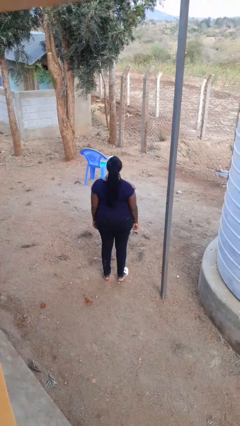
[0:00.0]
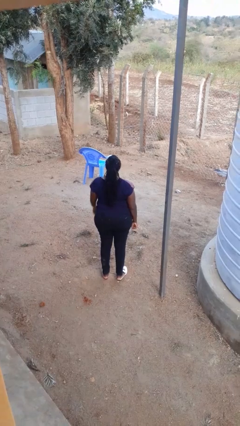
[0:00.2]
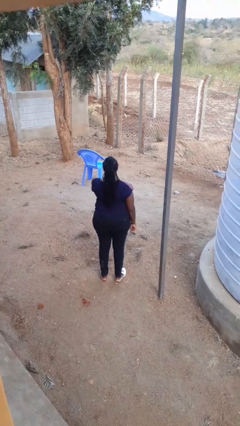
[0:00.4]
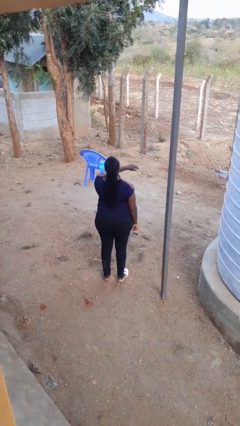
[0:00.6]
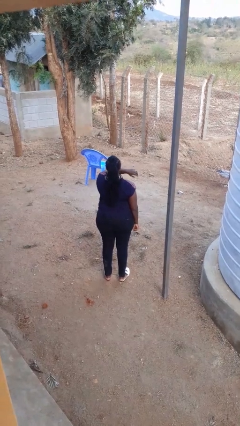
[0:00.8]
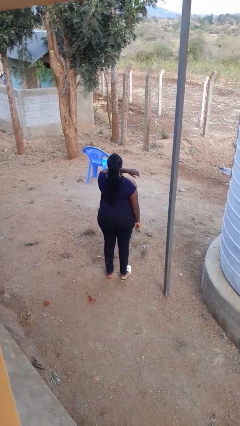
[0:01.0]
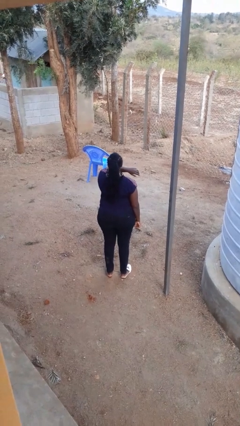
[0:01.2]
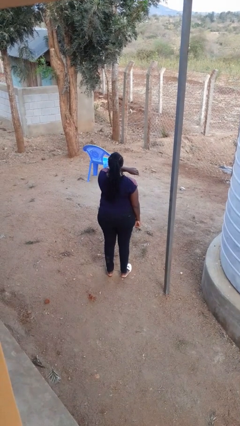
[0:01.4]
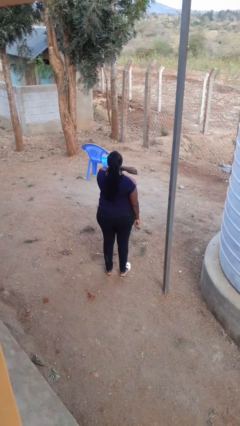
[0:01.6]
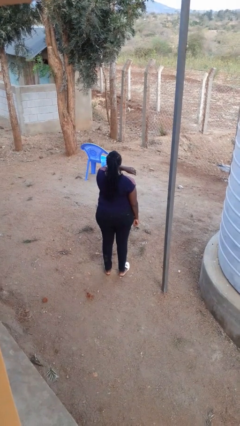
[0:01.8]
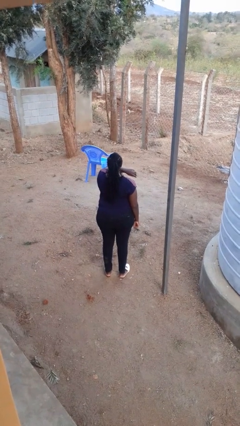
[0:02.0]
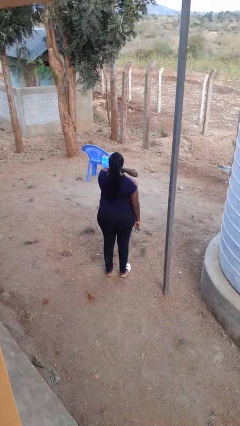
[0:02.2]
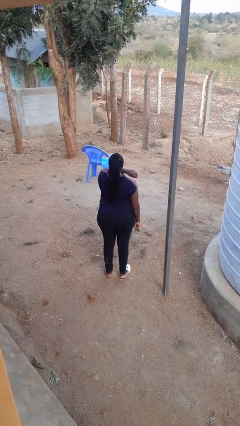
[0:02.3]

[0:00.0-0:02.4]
person sneezes into arm

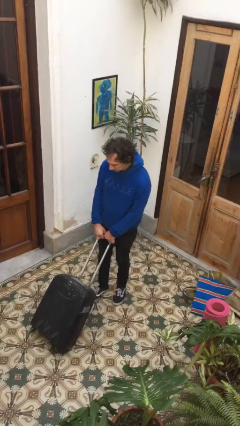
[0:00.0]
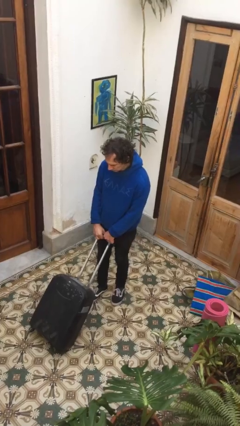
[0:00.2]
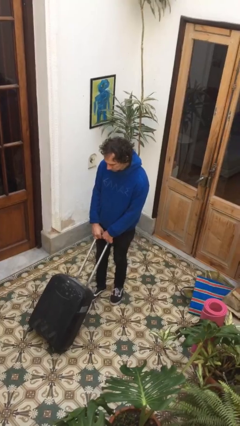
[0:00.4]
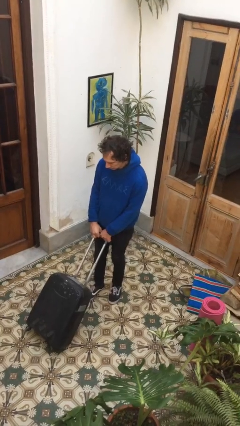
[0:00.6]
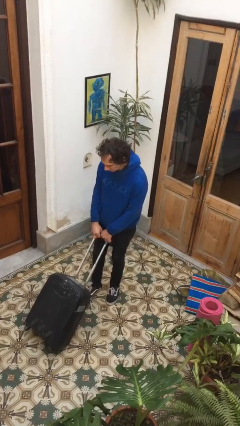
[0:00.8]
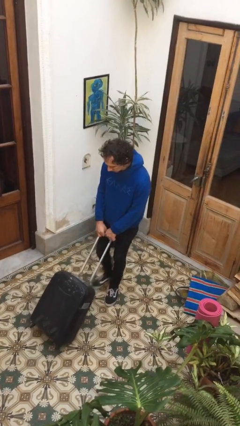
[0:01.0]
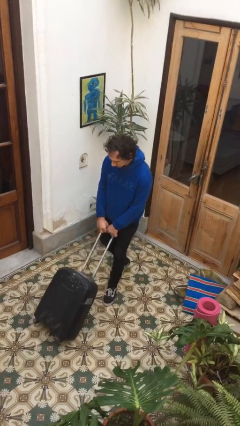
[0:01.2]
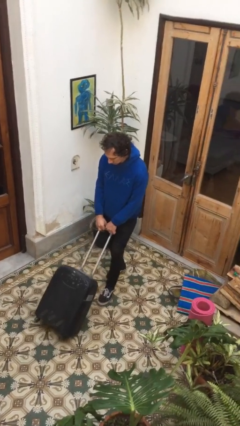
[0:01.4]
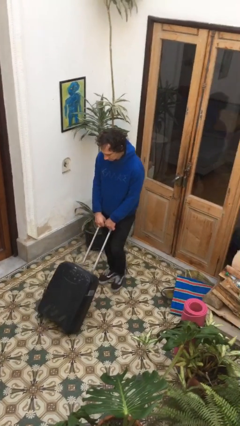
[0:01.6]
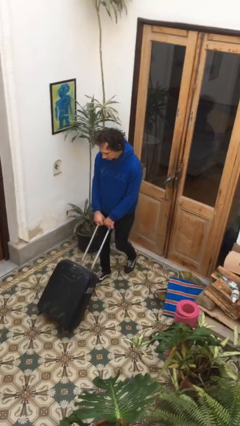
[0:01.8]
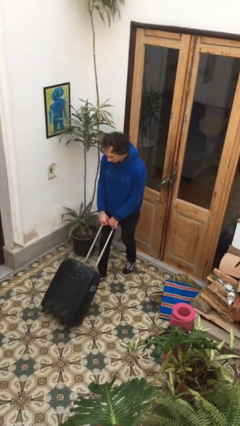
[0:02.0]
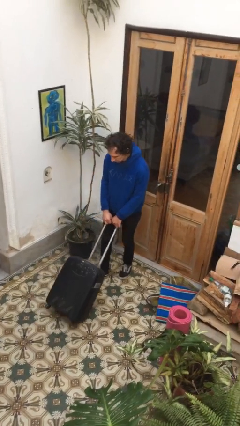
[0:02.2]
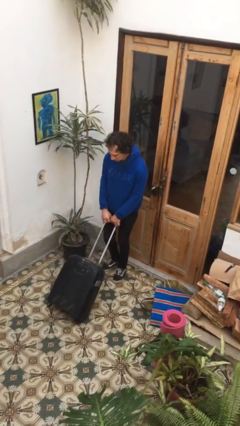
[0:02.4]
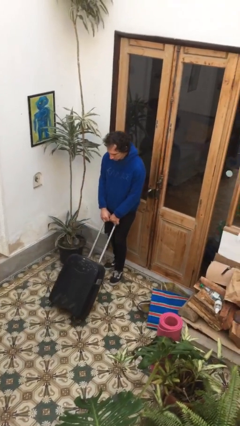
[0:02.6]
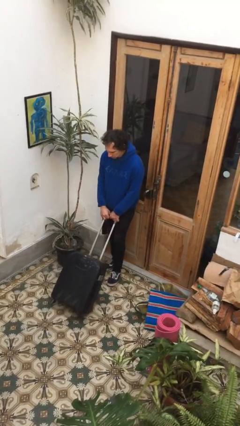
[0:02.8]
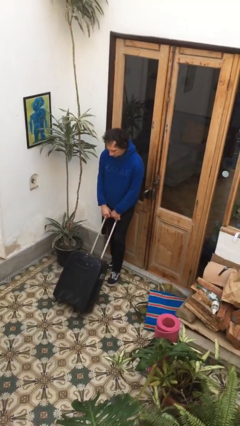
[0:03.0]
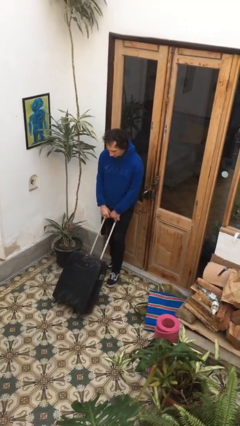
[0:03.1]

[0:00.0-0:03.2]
person pulls wheeled cart

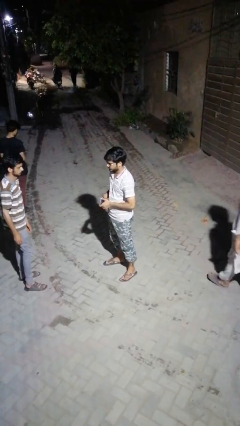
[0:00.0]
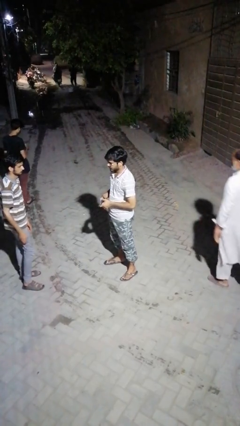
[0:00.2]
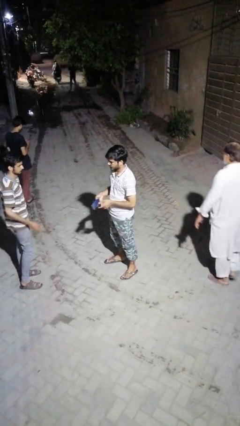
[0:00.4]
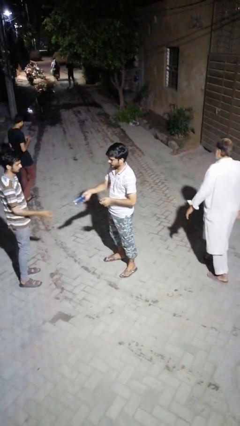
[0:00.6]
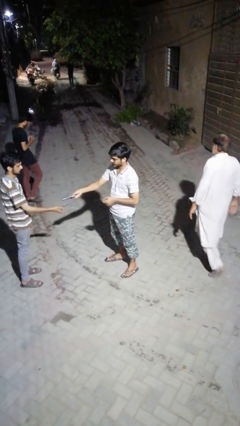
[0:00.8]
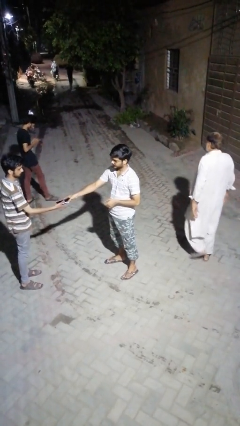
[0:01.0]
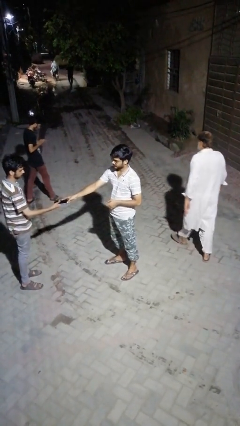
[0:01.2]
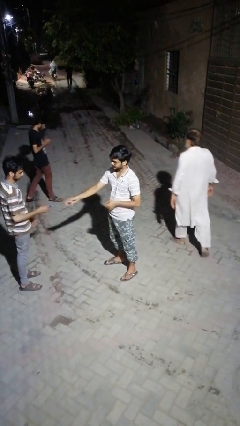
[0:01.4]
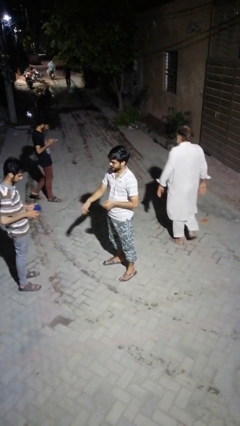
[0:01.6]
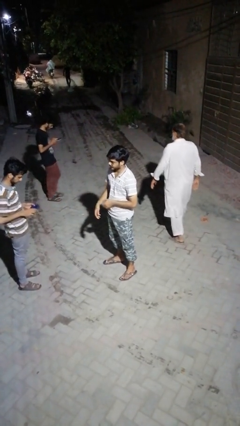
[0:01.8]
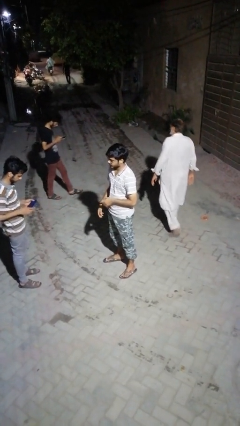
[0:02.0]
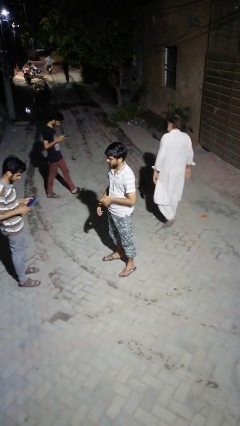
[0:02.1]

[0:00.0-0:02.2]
person transfers object to person

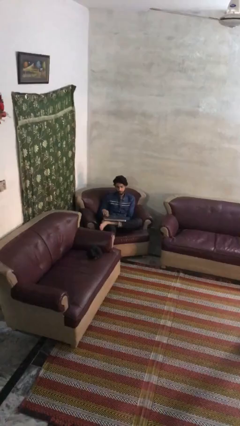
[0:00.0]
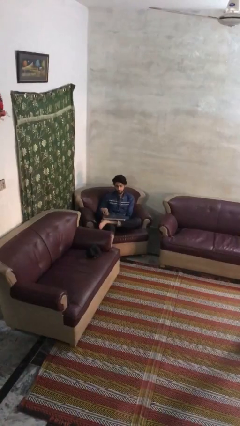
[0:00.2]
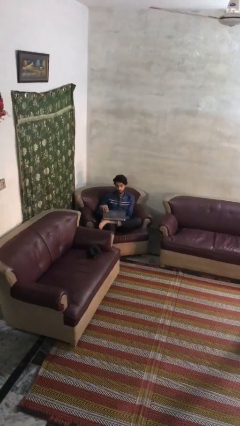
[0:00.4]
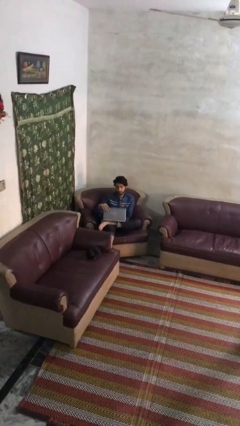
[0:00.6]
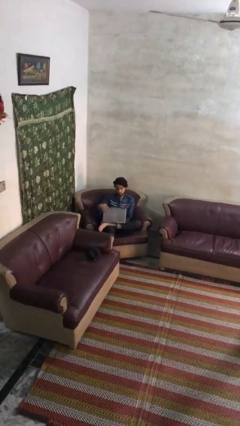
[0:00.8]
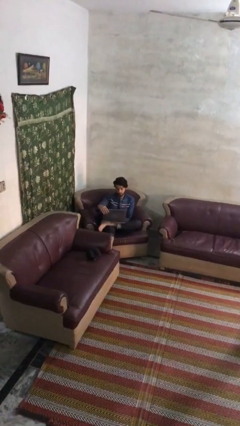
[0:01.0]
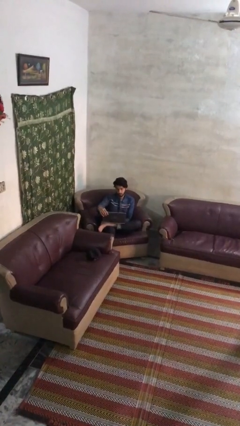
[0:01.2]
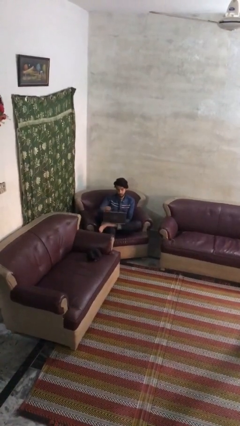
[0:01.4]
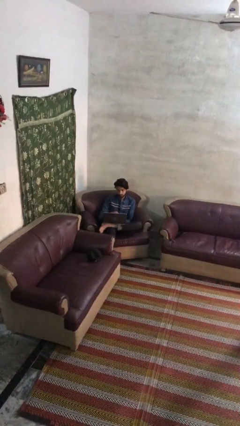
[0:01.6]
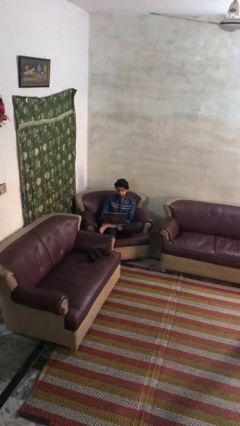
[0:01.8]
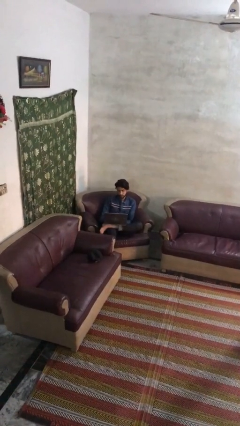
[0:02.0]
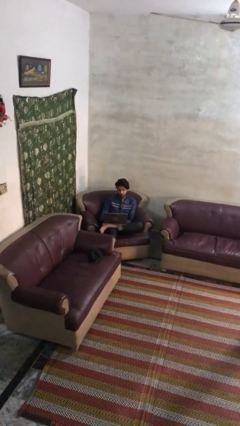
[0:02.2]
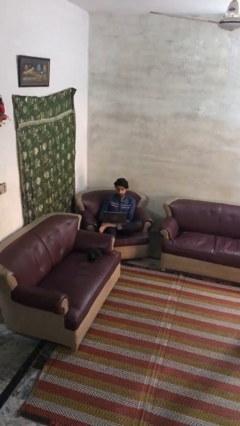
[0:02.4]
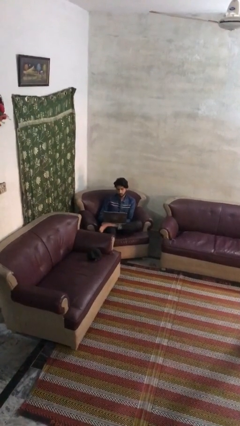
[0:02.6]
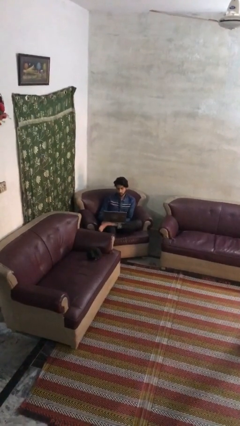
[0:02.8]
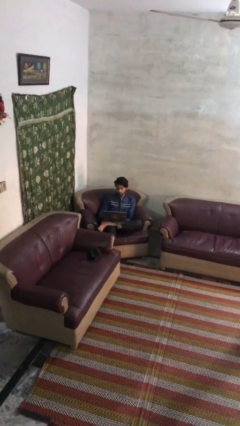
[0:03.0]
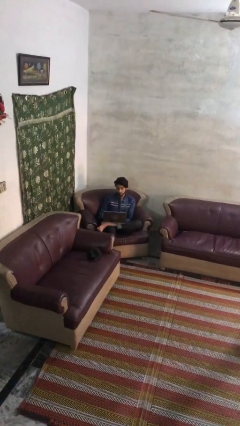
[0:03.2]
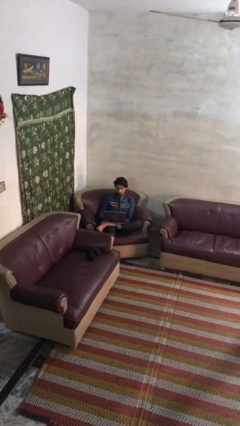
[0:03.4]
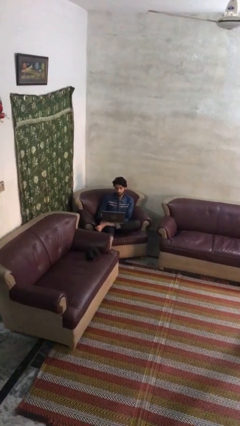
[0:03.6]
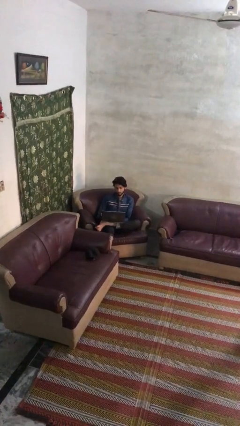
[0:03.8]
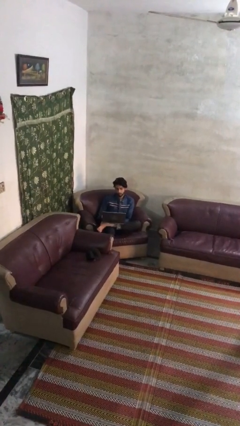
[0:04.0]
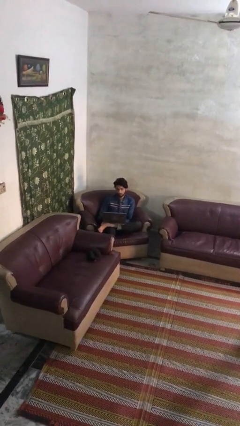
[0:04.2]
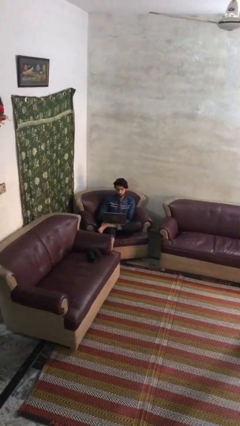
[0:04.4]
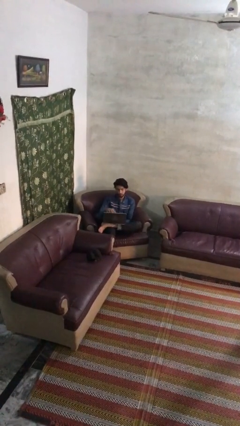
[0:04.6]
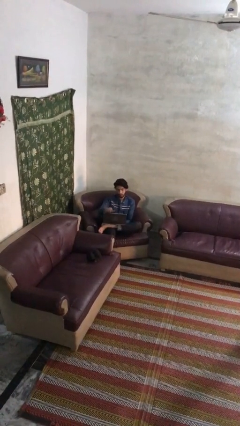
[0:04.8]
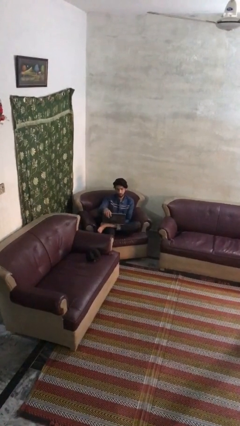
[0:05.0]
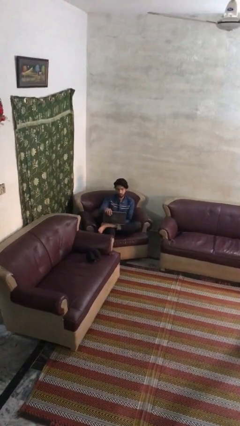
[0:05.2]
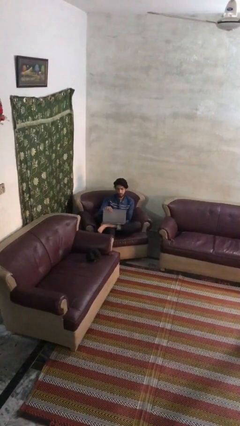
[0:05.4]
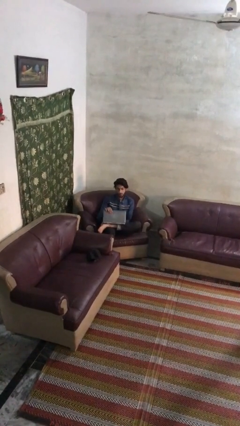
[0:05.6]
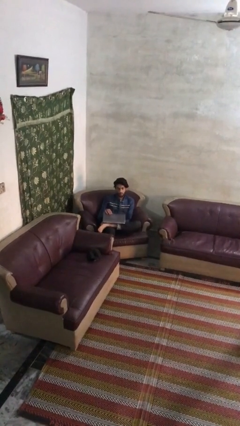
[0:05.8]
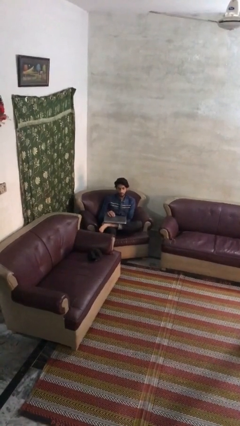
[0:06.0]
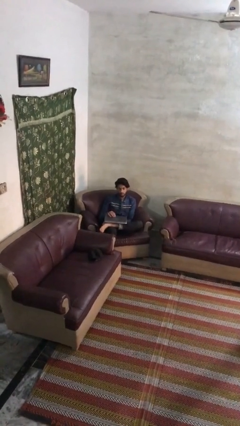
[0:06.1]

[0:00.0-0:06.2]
person interacts with laptop

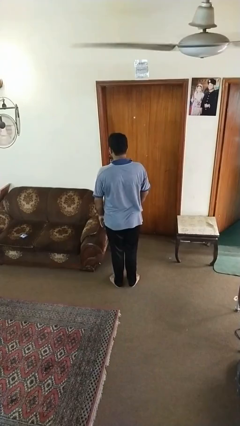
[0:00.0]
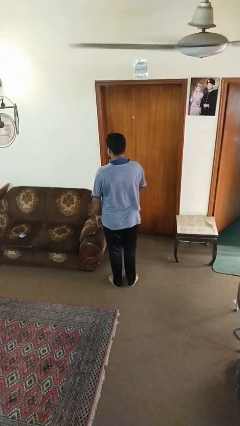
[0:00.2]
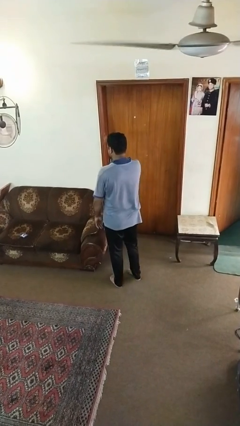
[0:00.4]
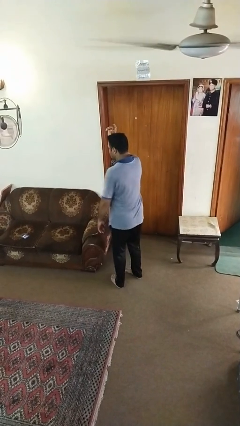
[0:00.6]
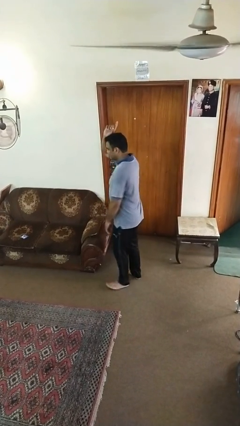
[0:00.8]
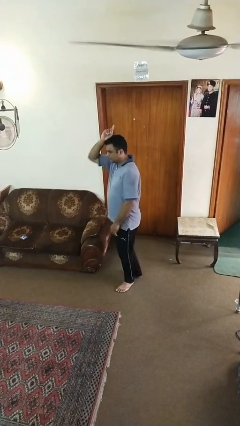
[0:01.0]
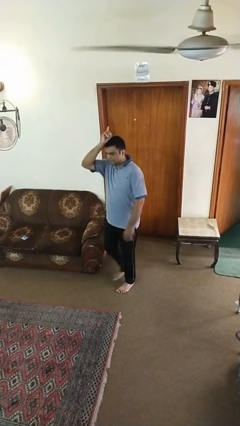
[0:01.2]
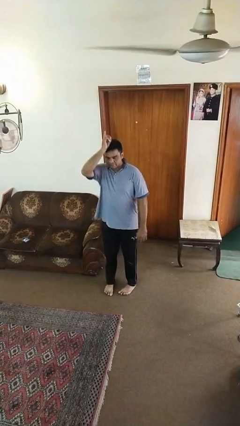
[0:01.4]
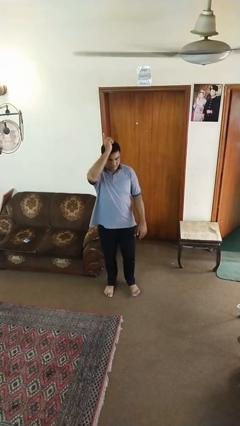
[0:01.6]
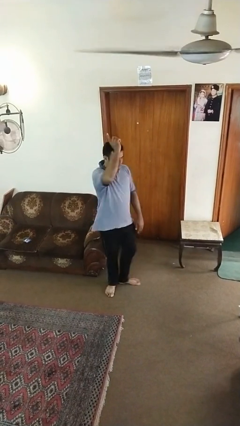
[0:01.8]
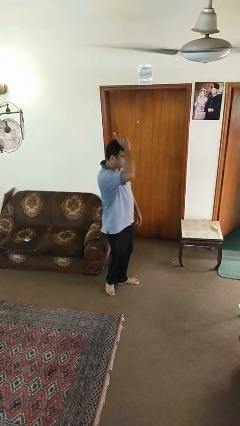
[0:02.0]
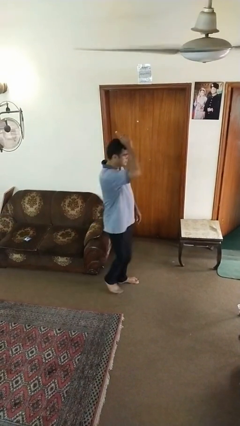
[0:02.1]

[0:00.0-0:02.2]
person twirls

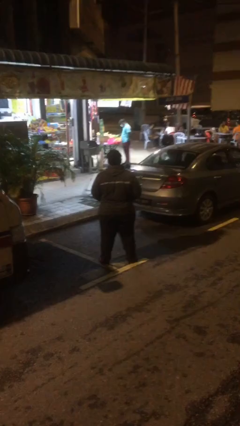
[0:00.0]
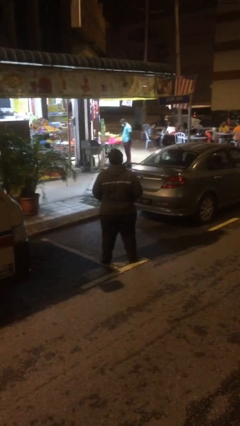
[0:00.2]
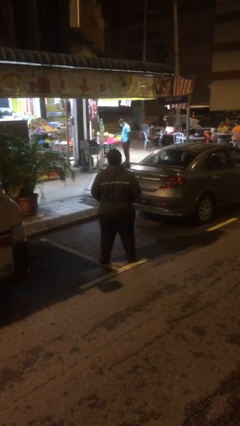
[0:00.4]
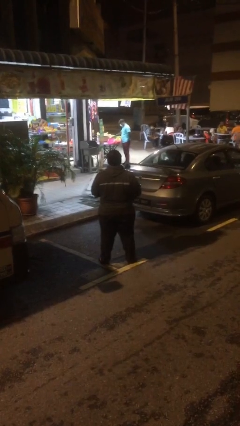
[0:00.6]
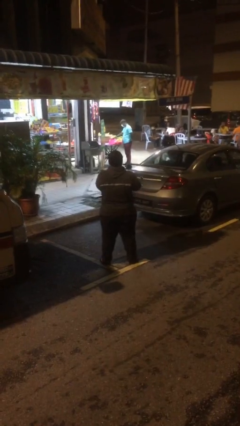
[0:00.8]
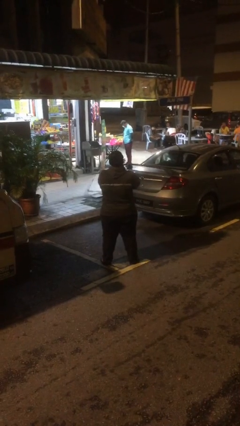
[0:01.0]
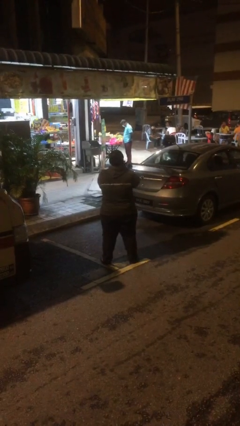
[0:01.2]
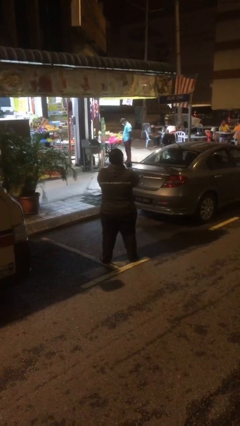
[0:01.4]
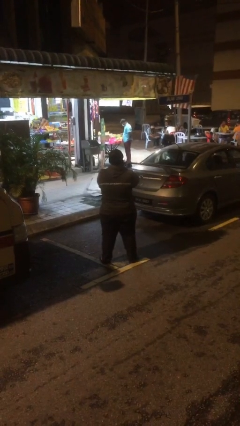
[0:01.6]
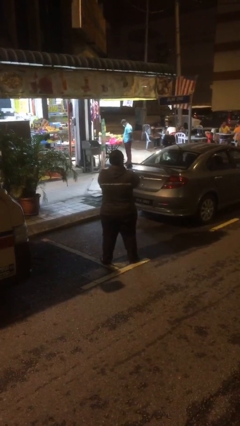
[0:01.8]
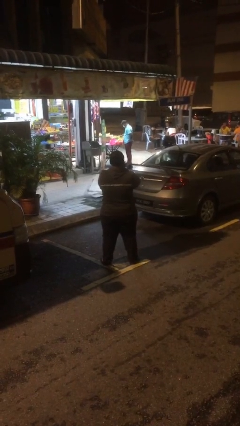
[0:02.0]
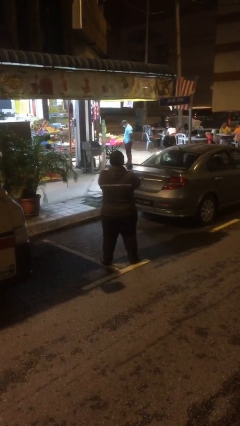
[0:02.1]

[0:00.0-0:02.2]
person blows into hands
